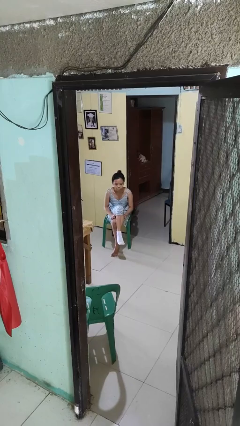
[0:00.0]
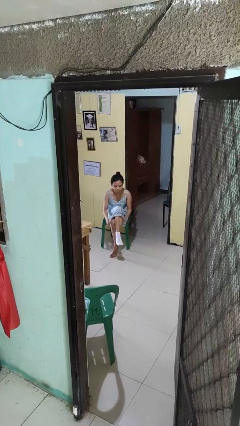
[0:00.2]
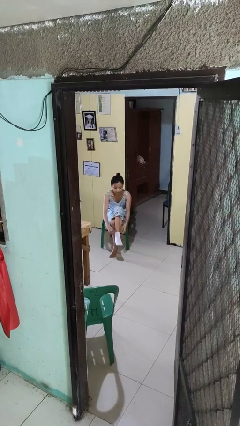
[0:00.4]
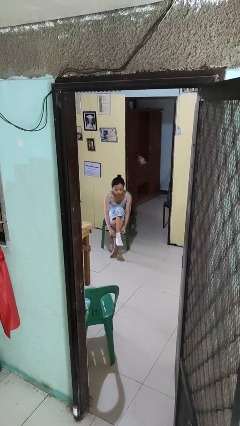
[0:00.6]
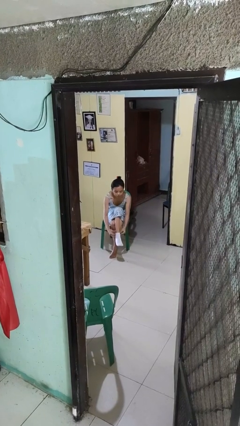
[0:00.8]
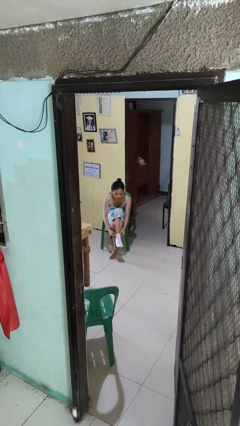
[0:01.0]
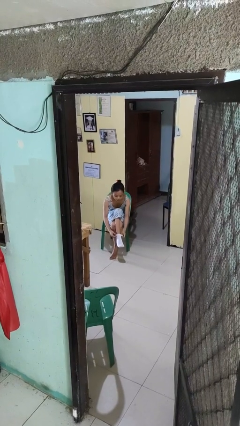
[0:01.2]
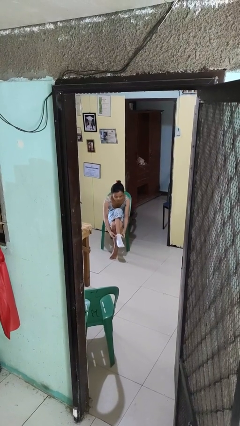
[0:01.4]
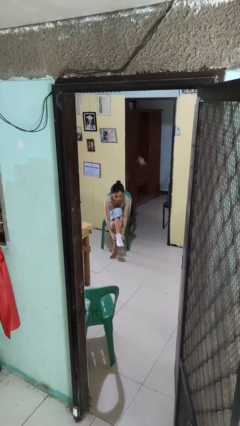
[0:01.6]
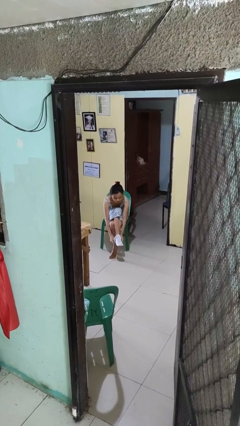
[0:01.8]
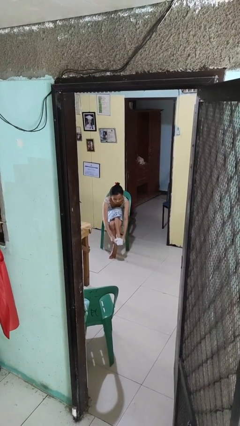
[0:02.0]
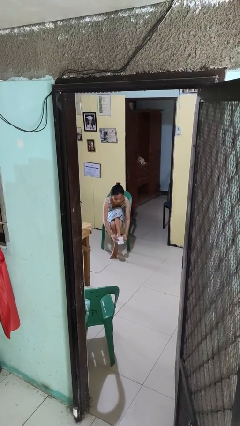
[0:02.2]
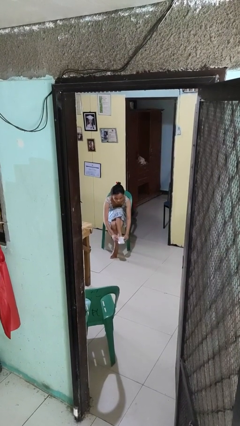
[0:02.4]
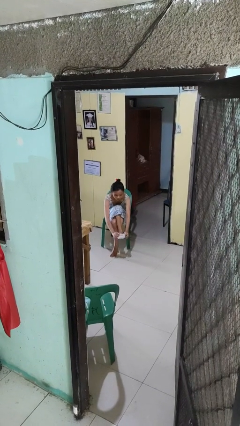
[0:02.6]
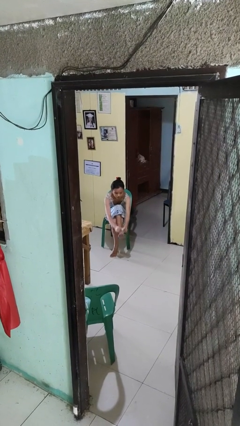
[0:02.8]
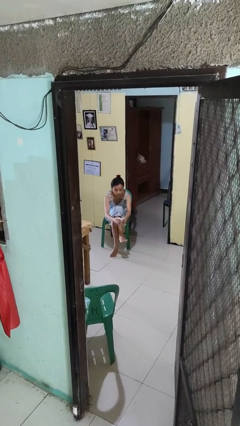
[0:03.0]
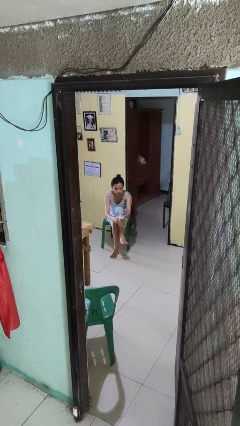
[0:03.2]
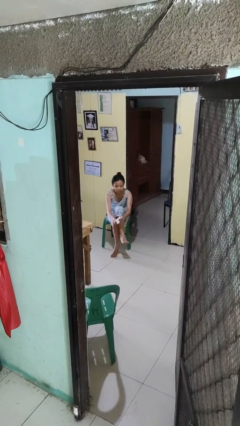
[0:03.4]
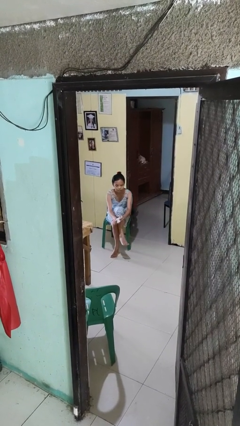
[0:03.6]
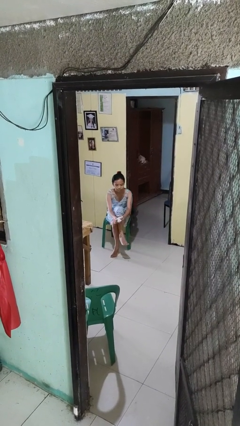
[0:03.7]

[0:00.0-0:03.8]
person takes off socks

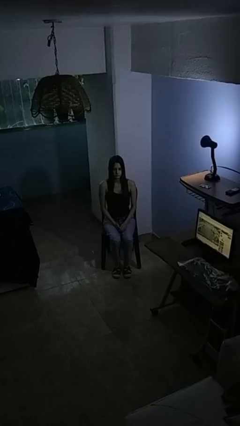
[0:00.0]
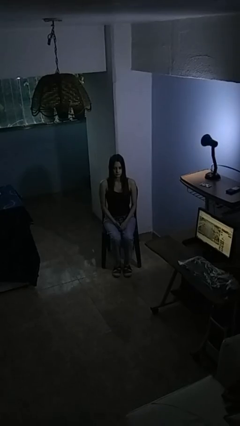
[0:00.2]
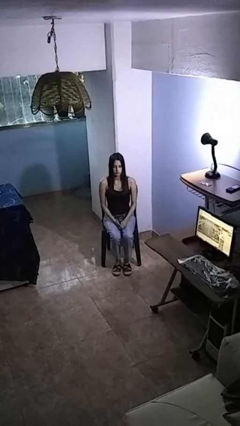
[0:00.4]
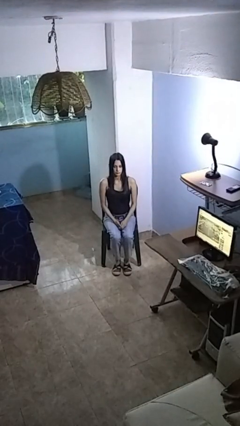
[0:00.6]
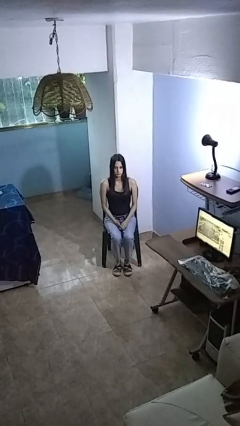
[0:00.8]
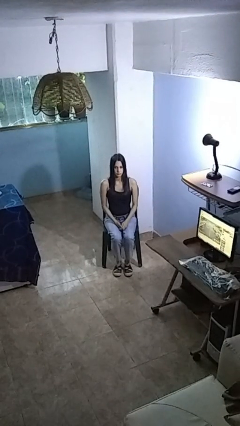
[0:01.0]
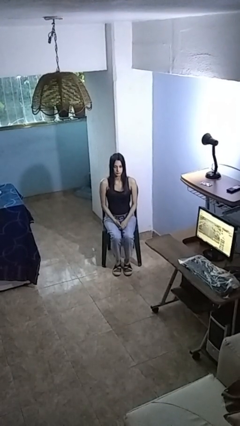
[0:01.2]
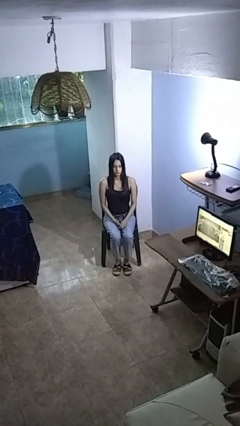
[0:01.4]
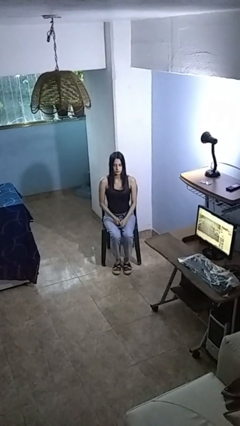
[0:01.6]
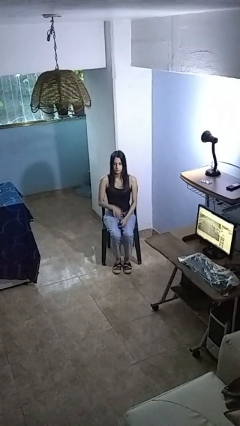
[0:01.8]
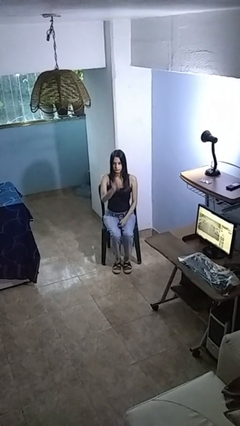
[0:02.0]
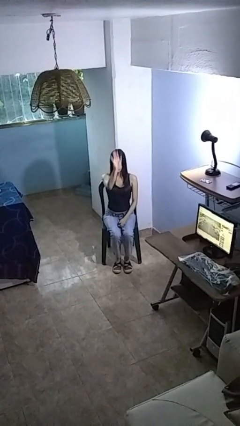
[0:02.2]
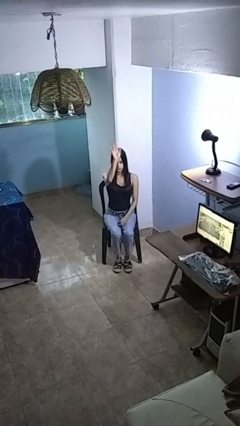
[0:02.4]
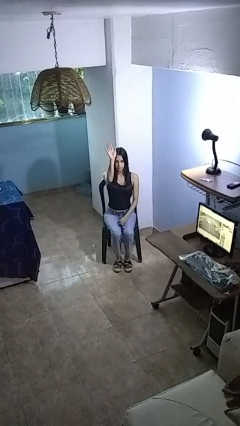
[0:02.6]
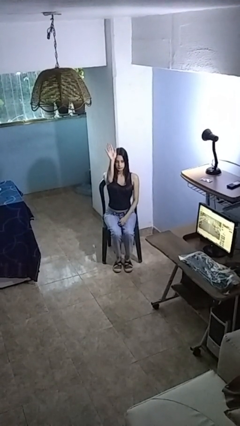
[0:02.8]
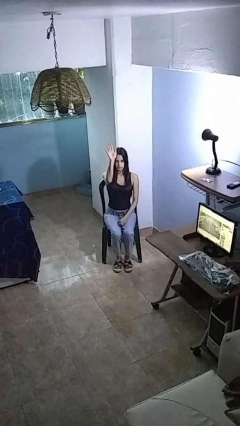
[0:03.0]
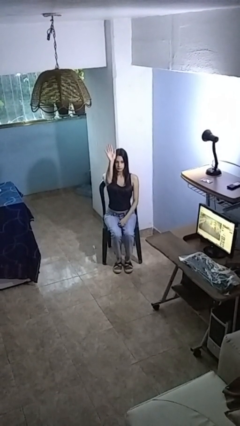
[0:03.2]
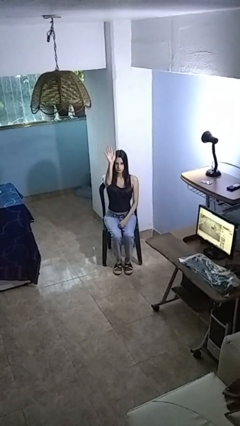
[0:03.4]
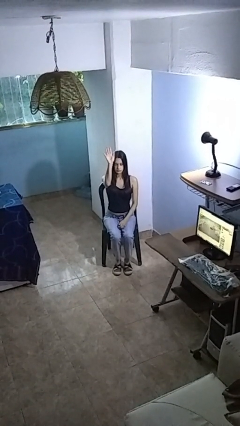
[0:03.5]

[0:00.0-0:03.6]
person gestures raise hand

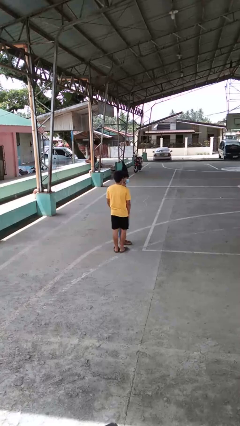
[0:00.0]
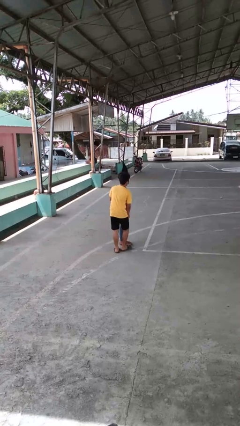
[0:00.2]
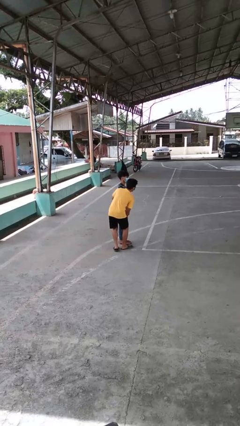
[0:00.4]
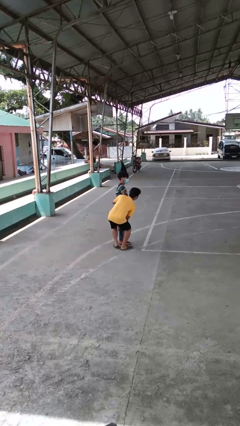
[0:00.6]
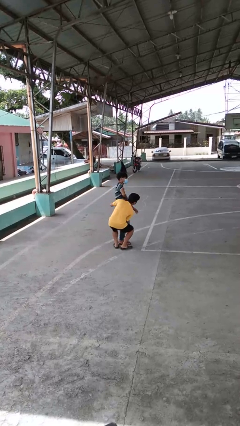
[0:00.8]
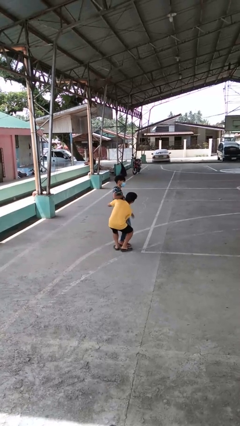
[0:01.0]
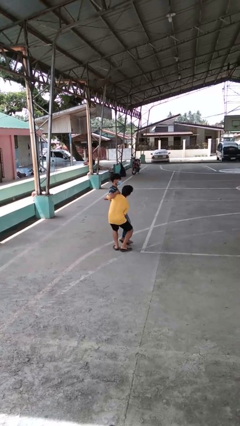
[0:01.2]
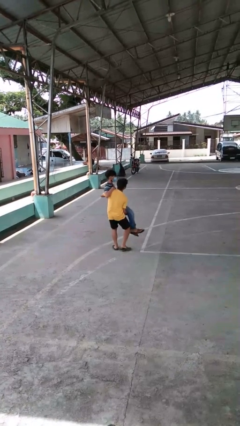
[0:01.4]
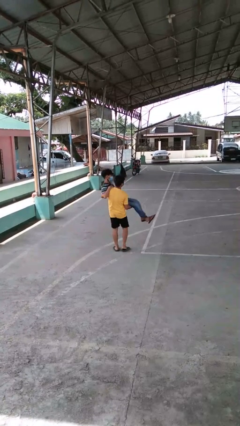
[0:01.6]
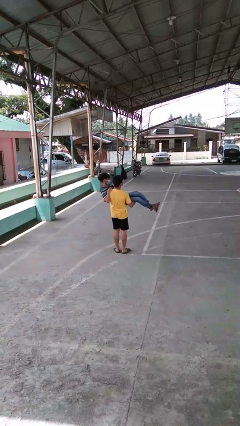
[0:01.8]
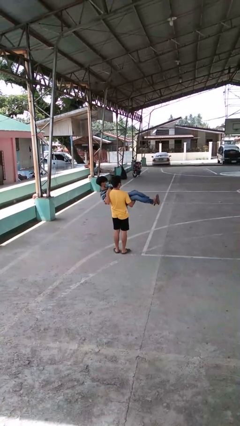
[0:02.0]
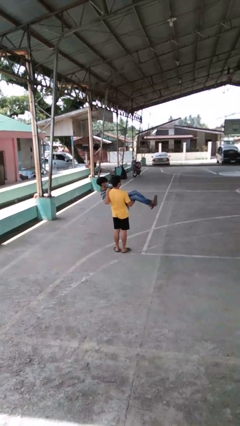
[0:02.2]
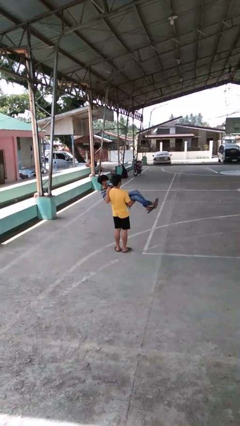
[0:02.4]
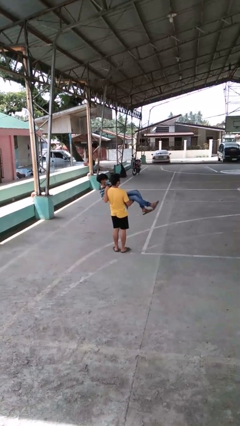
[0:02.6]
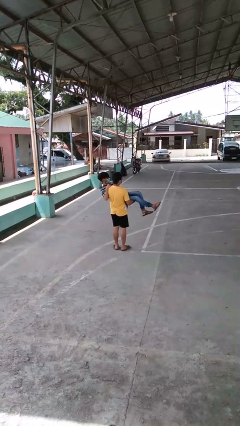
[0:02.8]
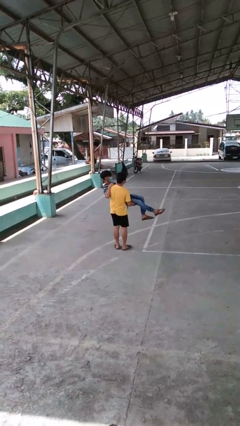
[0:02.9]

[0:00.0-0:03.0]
person picks up person

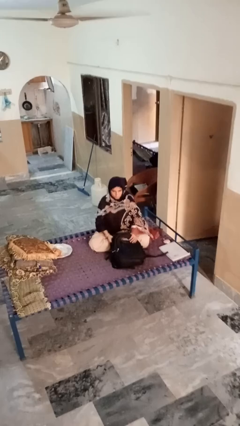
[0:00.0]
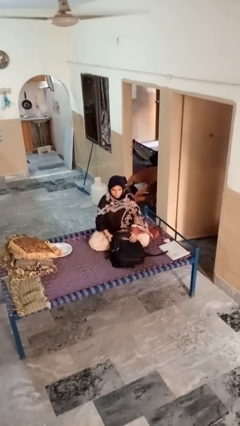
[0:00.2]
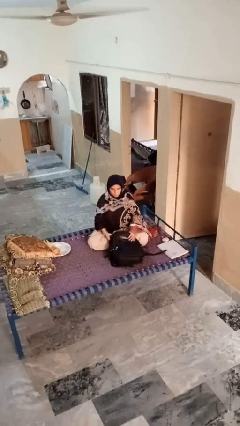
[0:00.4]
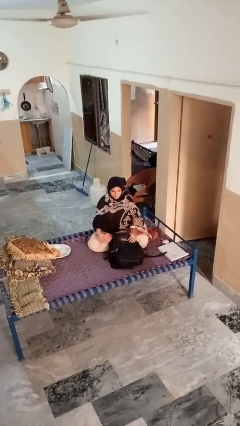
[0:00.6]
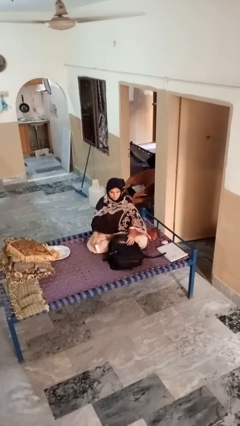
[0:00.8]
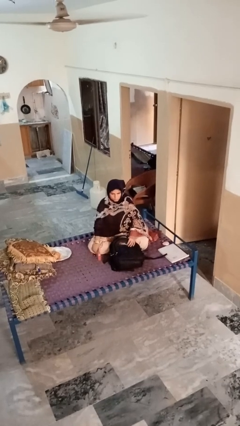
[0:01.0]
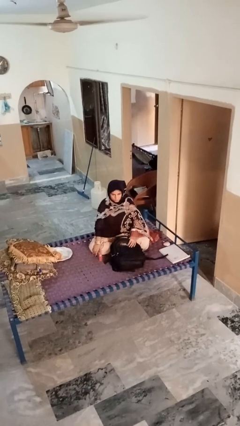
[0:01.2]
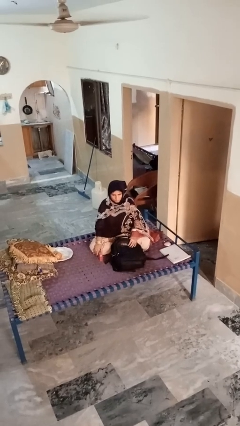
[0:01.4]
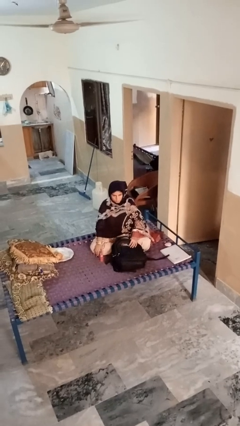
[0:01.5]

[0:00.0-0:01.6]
person takes object from bag

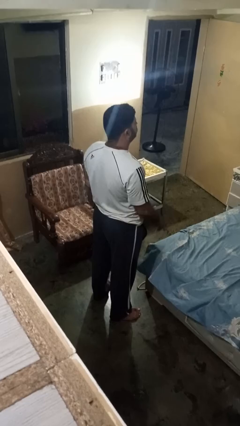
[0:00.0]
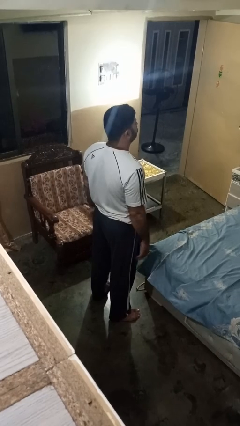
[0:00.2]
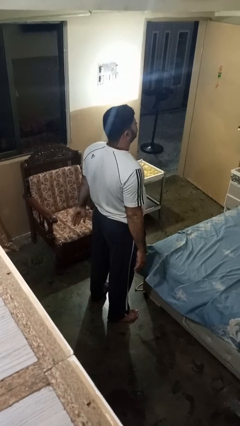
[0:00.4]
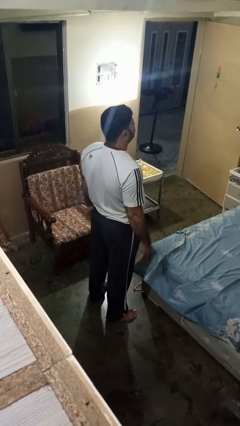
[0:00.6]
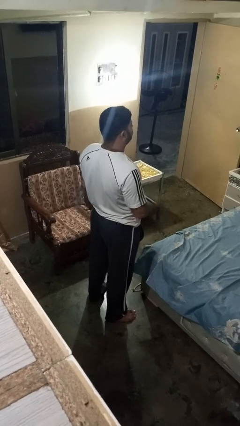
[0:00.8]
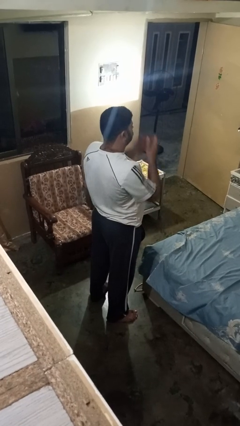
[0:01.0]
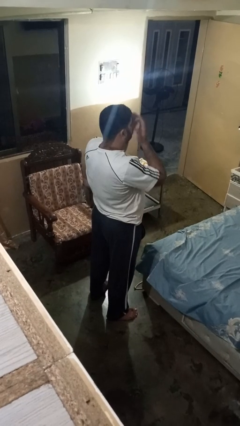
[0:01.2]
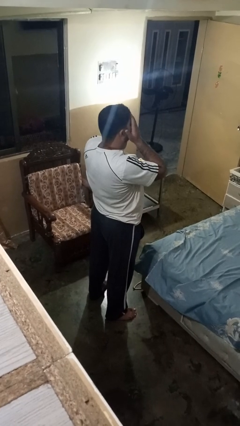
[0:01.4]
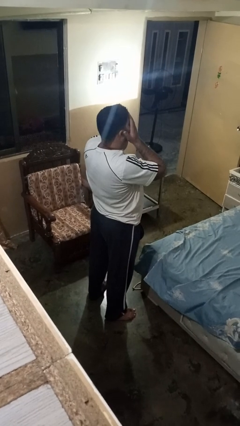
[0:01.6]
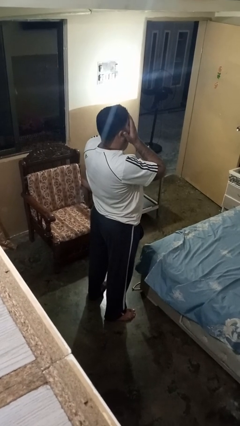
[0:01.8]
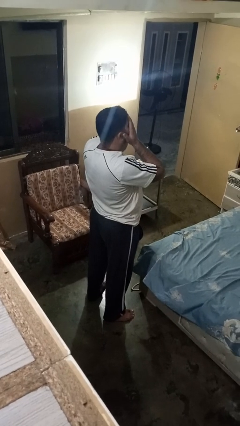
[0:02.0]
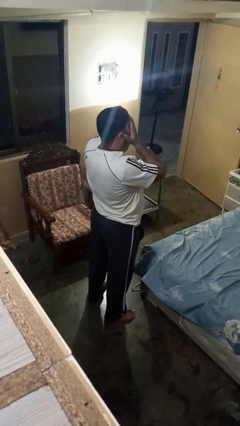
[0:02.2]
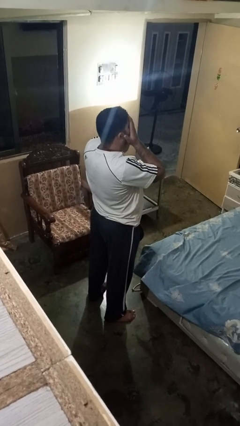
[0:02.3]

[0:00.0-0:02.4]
person covers face with hands

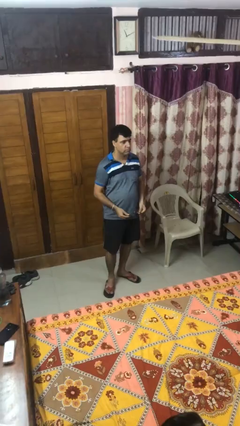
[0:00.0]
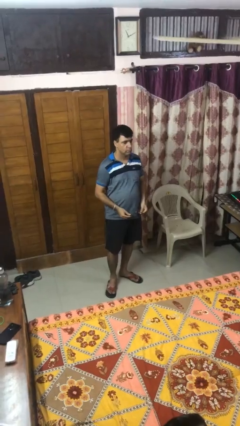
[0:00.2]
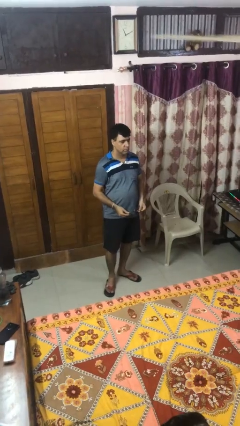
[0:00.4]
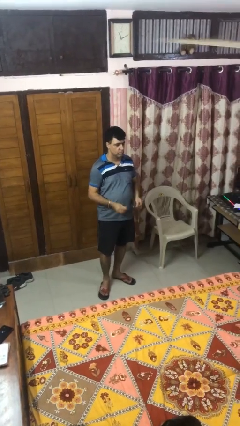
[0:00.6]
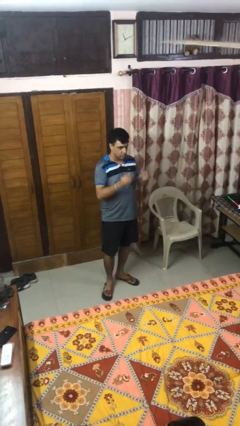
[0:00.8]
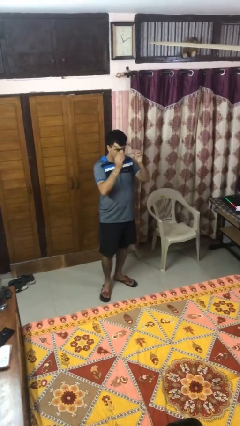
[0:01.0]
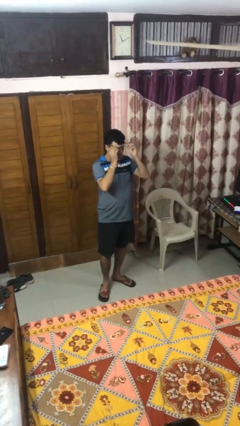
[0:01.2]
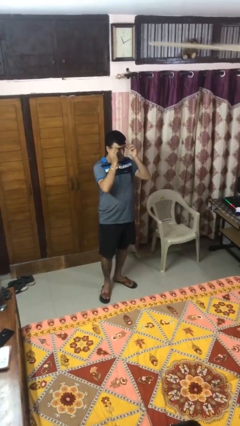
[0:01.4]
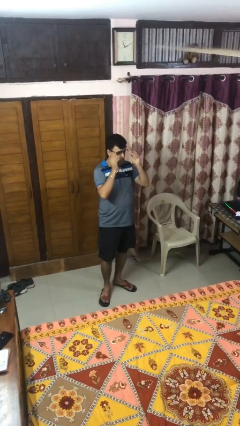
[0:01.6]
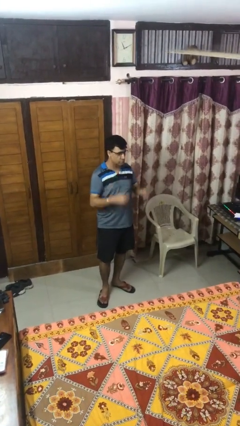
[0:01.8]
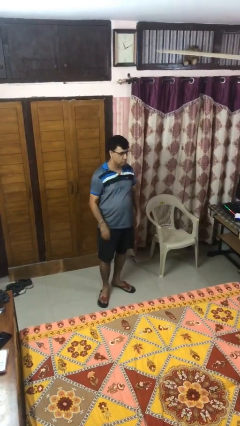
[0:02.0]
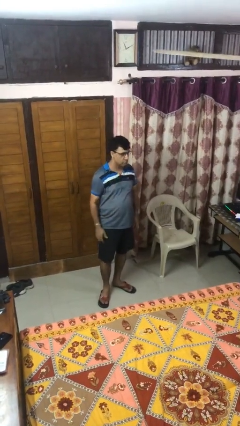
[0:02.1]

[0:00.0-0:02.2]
person puts on glasses

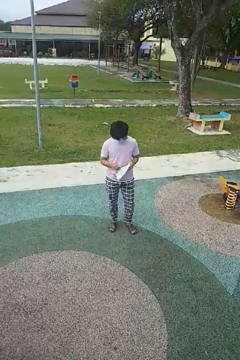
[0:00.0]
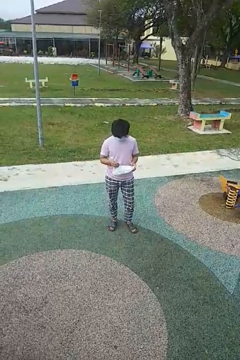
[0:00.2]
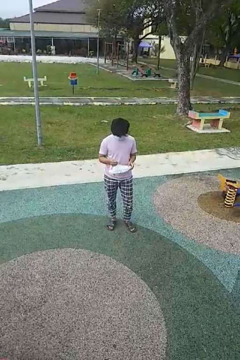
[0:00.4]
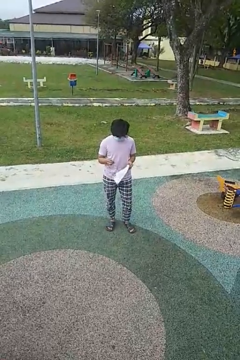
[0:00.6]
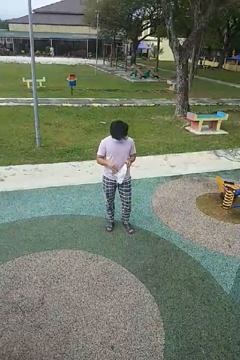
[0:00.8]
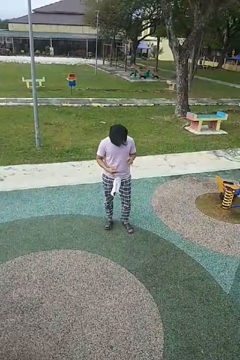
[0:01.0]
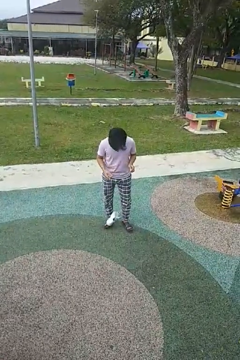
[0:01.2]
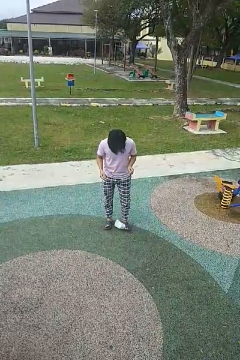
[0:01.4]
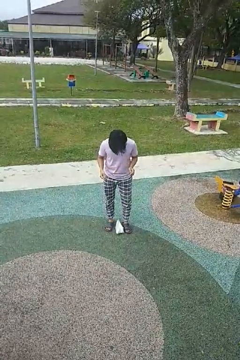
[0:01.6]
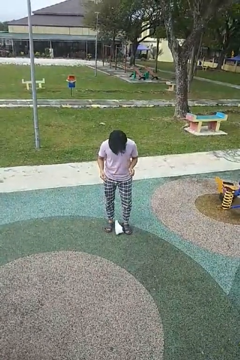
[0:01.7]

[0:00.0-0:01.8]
person drops object
